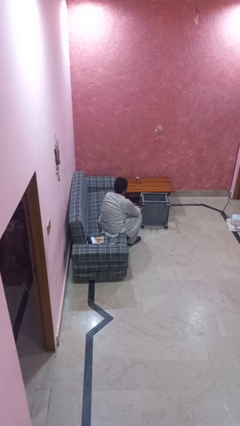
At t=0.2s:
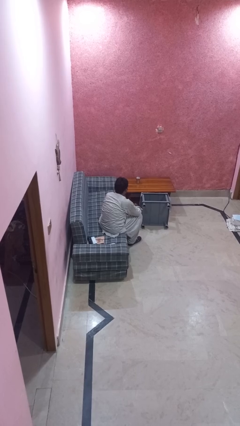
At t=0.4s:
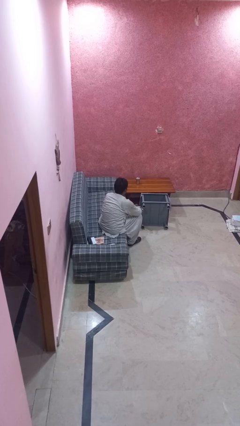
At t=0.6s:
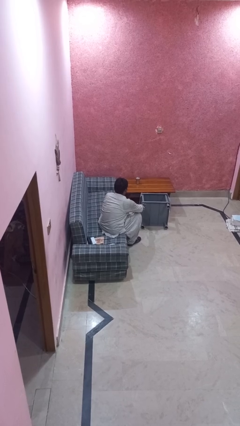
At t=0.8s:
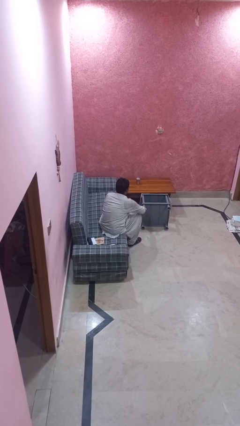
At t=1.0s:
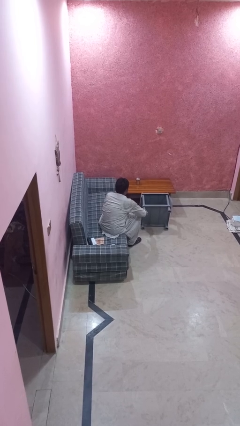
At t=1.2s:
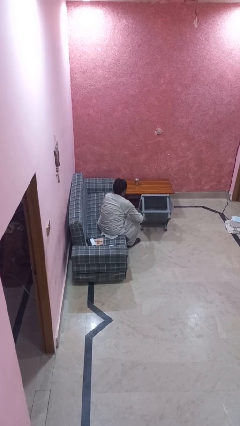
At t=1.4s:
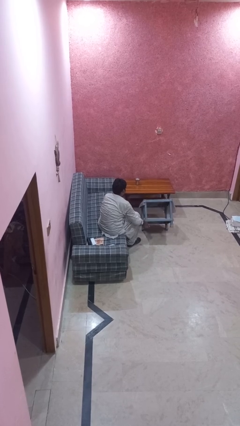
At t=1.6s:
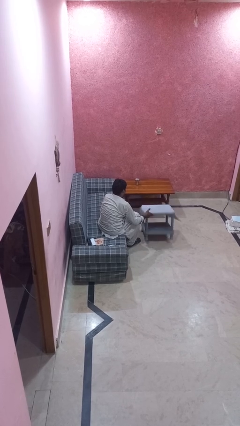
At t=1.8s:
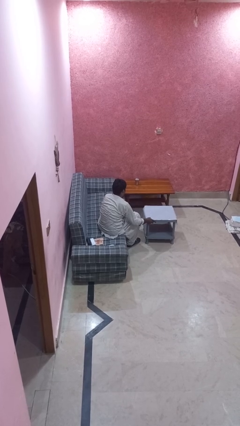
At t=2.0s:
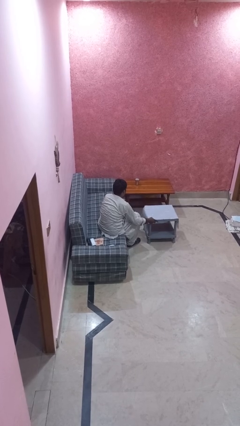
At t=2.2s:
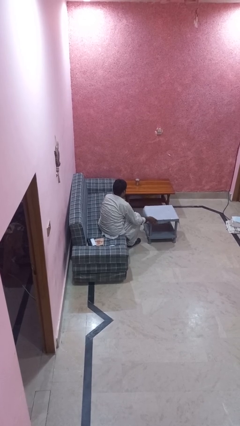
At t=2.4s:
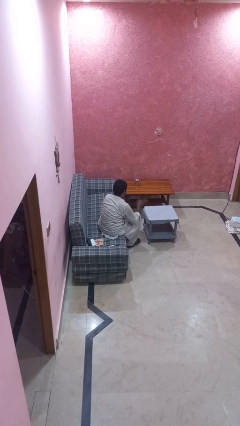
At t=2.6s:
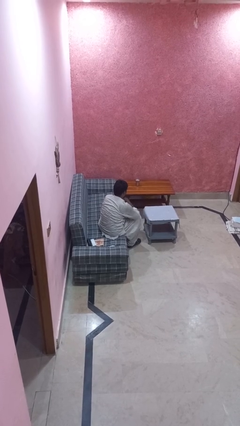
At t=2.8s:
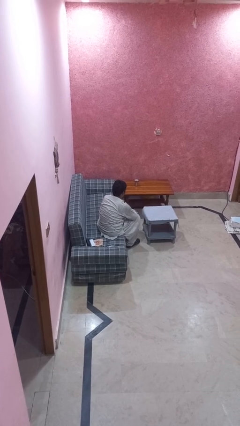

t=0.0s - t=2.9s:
person sets upright furniture

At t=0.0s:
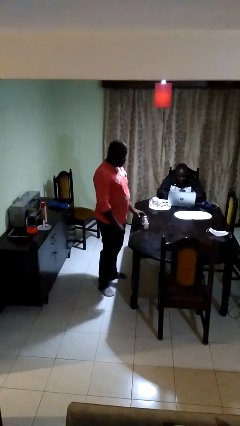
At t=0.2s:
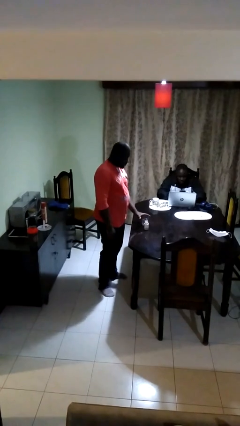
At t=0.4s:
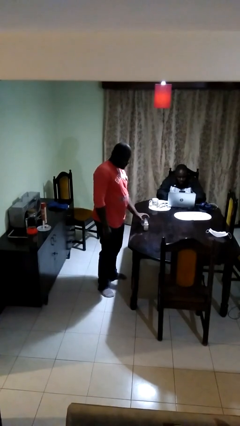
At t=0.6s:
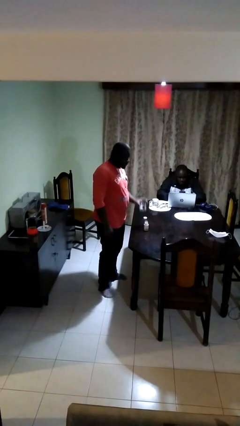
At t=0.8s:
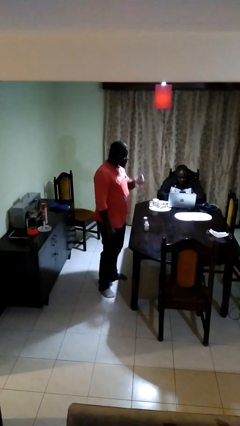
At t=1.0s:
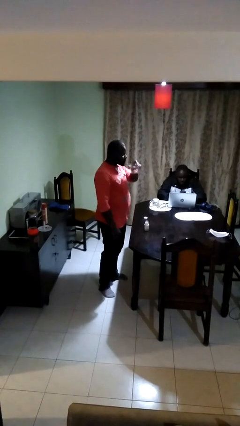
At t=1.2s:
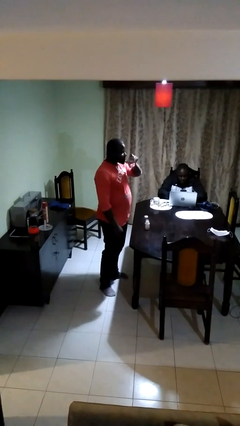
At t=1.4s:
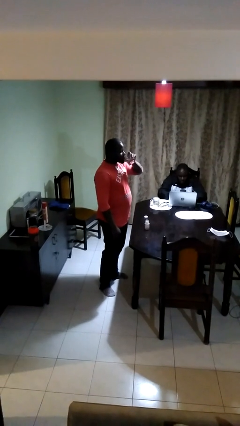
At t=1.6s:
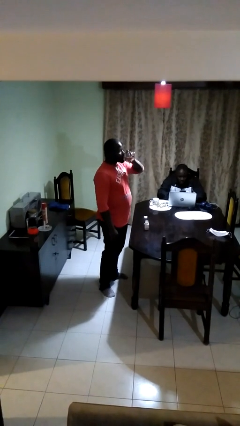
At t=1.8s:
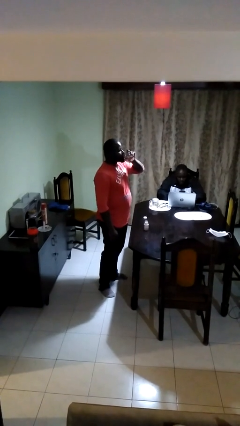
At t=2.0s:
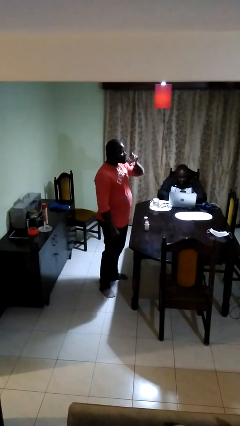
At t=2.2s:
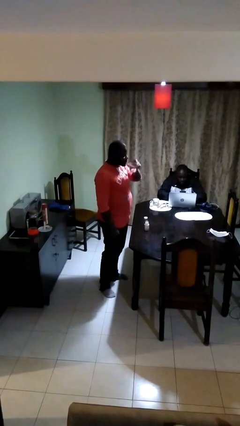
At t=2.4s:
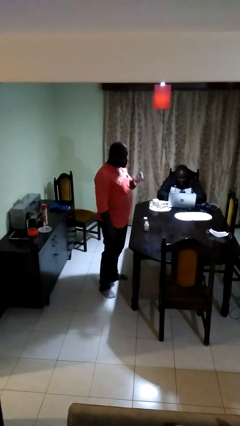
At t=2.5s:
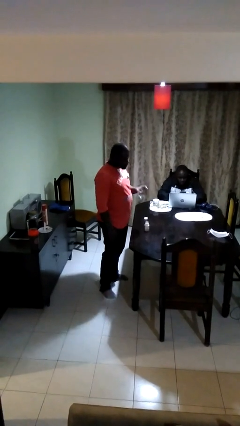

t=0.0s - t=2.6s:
person drinks from cup

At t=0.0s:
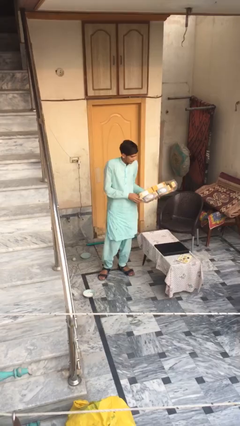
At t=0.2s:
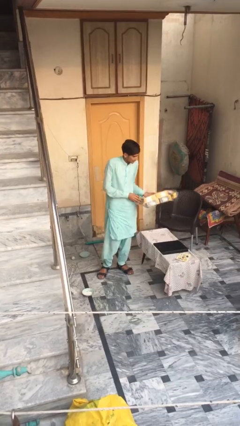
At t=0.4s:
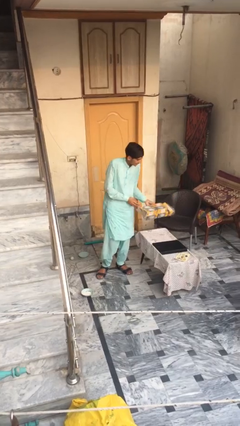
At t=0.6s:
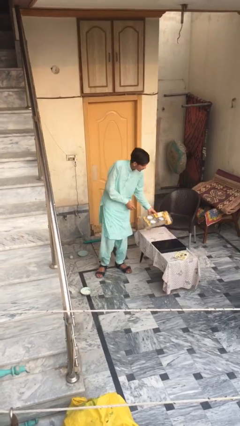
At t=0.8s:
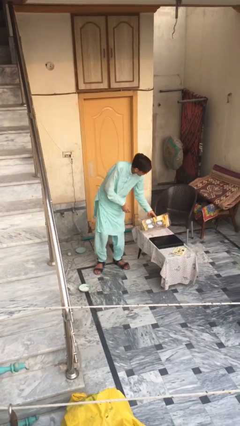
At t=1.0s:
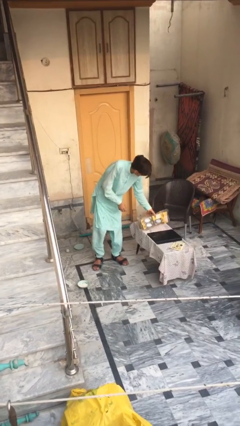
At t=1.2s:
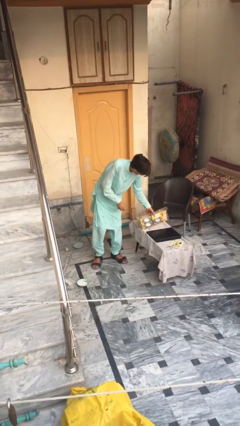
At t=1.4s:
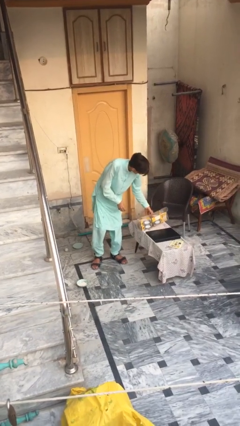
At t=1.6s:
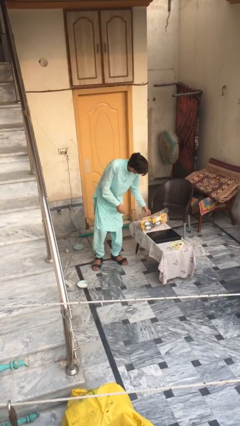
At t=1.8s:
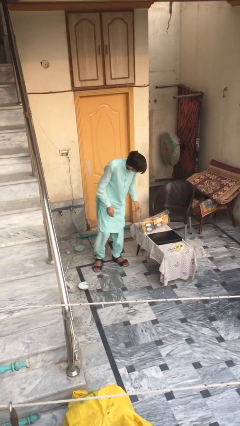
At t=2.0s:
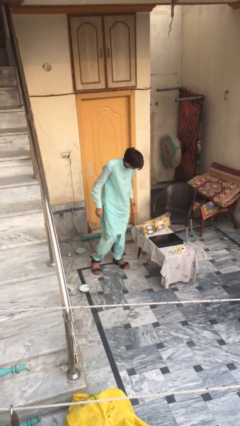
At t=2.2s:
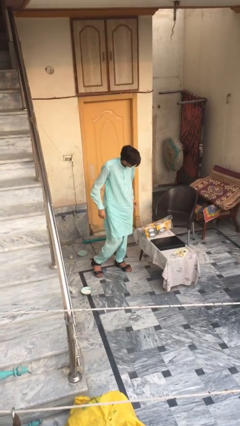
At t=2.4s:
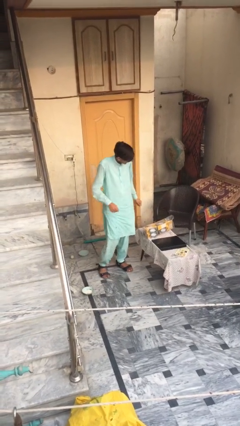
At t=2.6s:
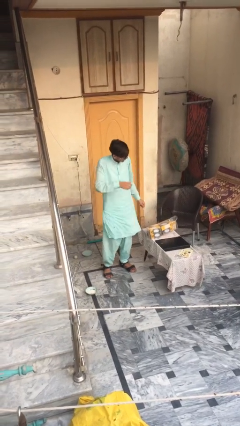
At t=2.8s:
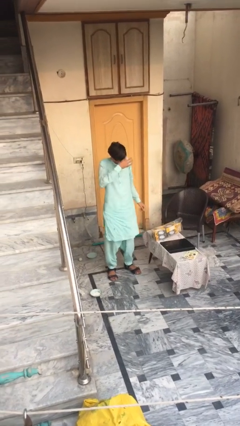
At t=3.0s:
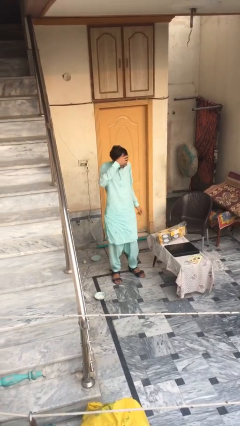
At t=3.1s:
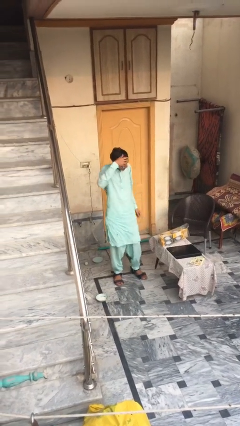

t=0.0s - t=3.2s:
person puts down object on table

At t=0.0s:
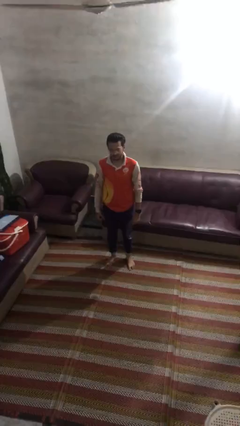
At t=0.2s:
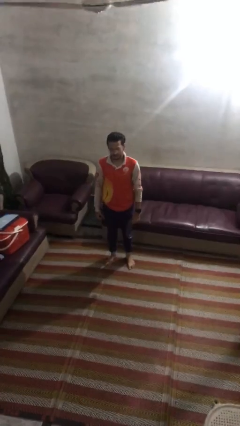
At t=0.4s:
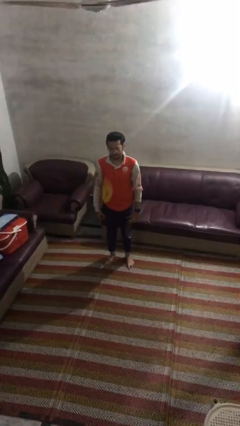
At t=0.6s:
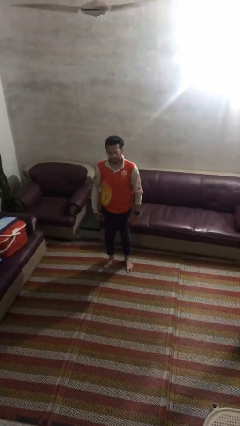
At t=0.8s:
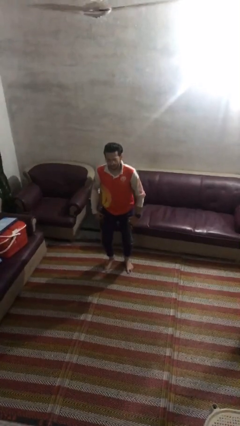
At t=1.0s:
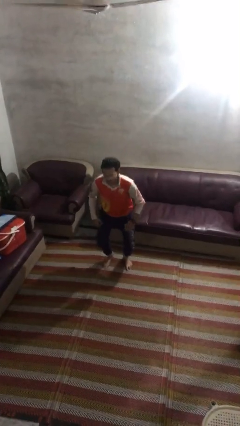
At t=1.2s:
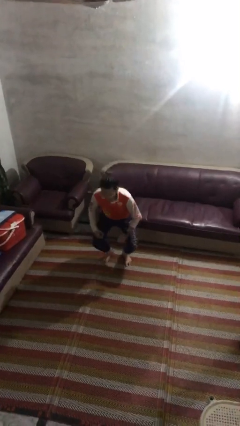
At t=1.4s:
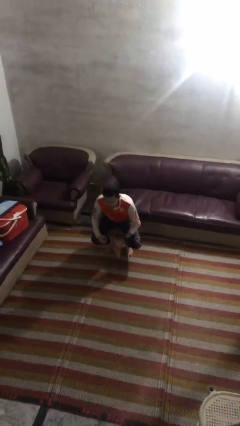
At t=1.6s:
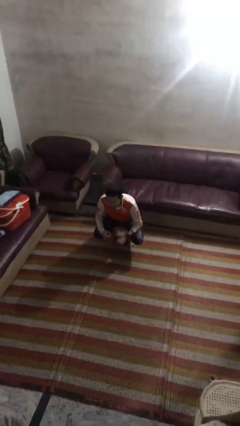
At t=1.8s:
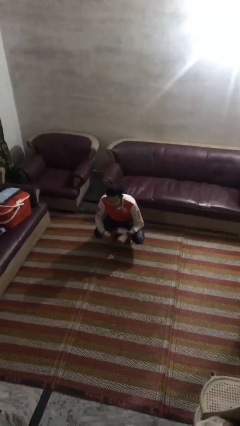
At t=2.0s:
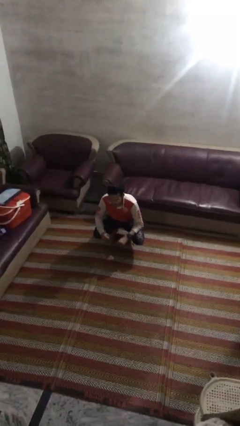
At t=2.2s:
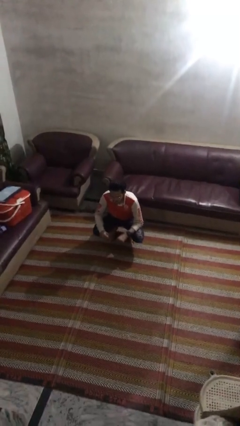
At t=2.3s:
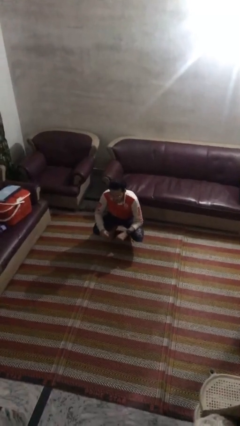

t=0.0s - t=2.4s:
person squats

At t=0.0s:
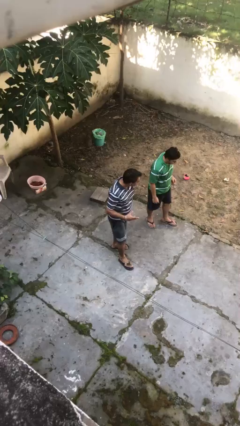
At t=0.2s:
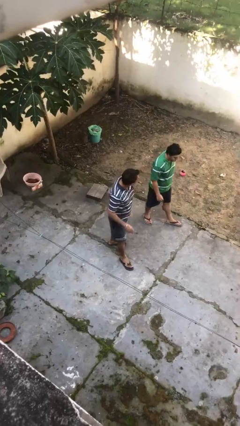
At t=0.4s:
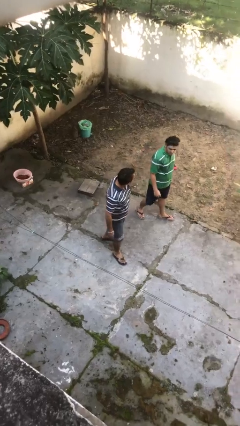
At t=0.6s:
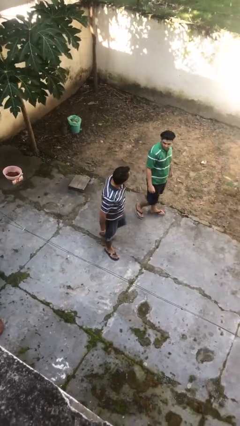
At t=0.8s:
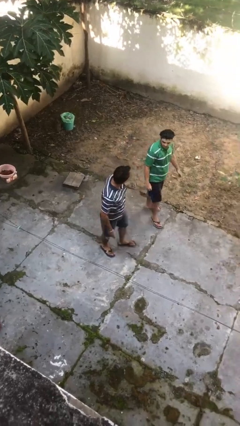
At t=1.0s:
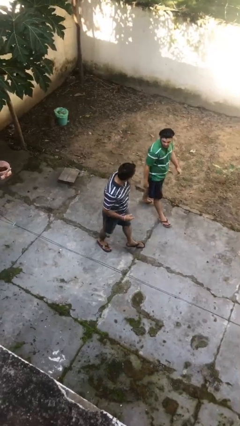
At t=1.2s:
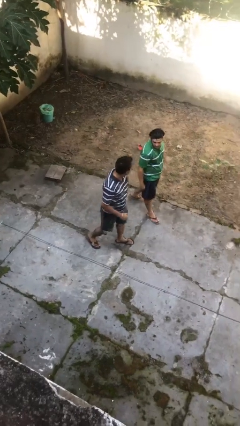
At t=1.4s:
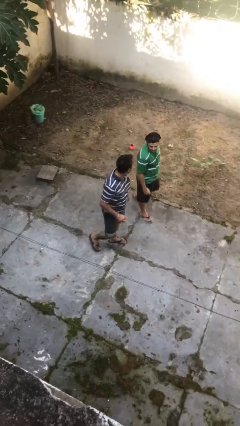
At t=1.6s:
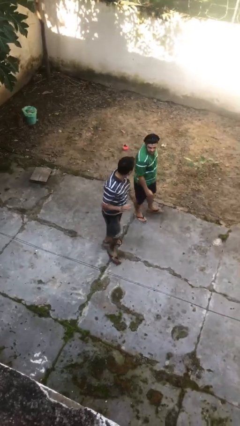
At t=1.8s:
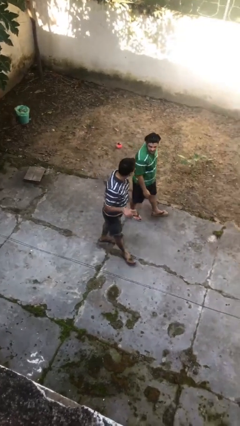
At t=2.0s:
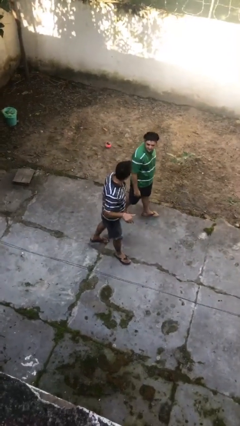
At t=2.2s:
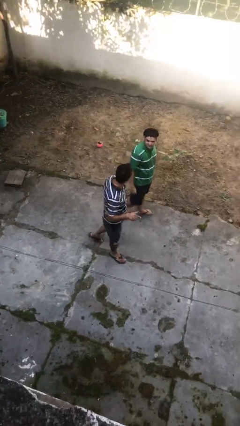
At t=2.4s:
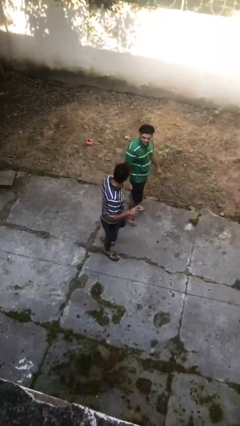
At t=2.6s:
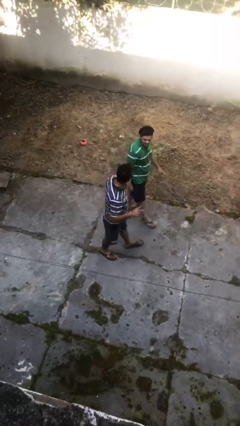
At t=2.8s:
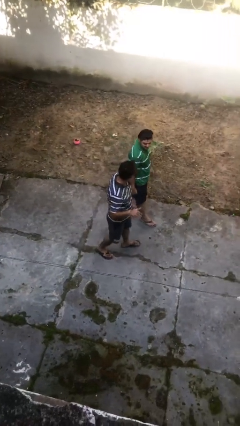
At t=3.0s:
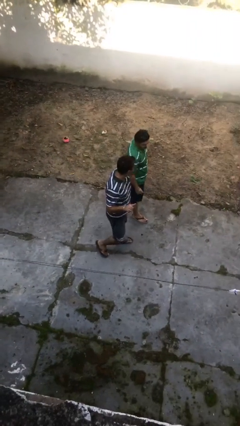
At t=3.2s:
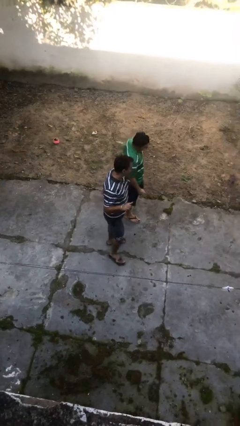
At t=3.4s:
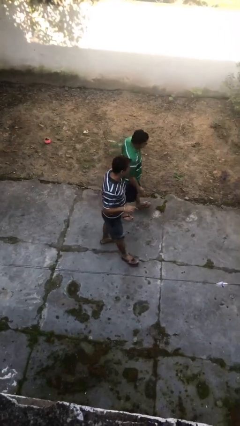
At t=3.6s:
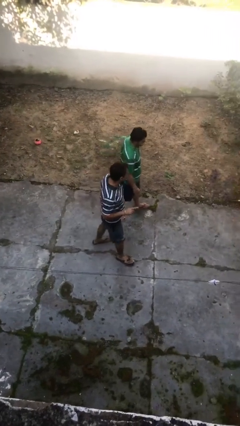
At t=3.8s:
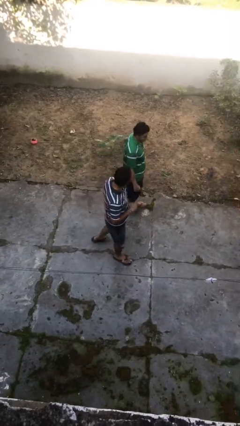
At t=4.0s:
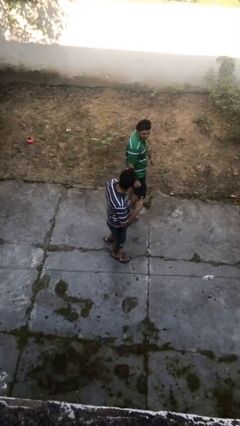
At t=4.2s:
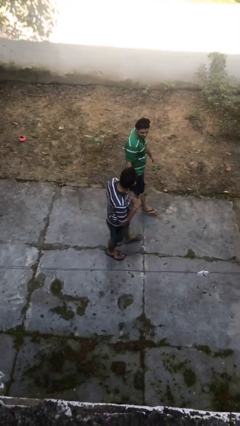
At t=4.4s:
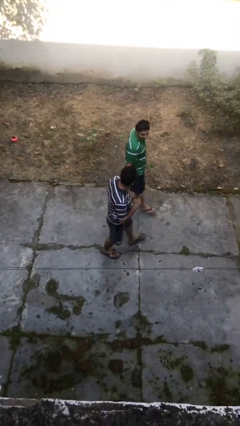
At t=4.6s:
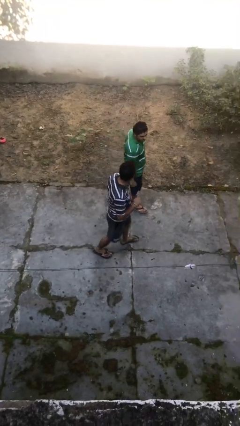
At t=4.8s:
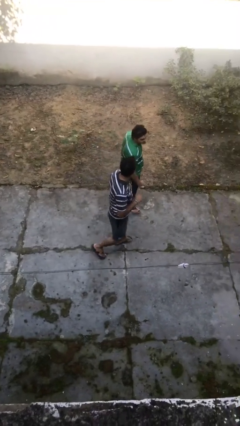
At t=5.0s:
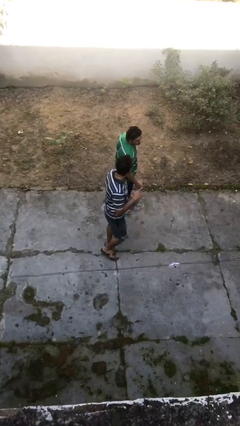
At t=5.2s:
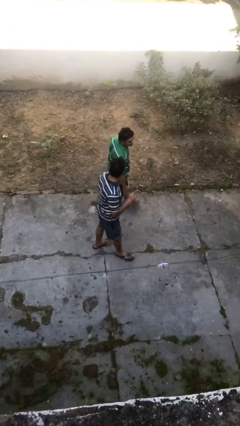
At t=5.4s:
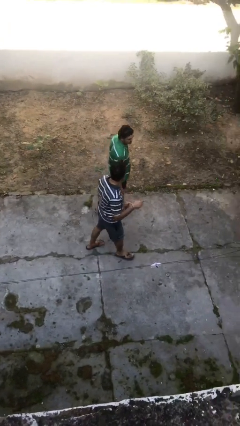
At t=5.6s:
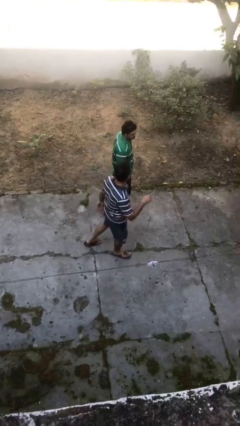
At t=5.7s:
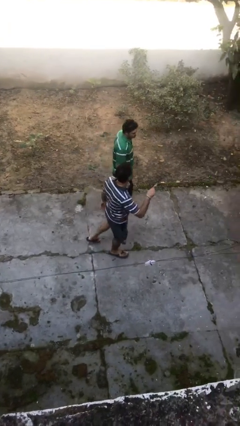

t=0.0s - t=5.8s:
person talks to person

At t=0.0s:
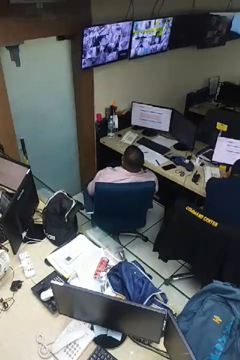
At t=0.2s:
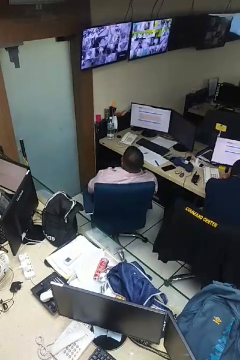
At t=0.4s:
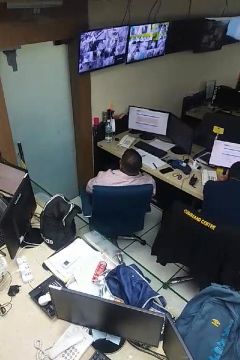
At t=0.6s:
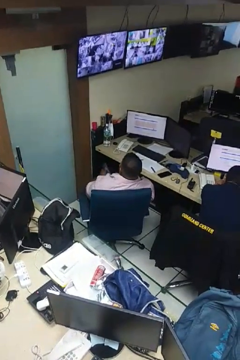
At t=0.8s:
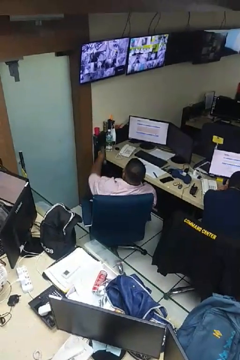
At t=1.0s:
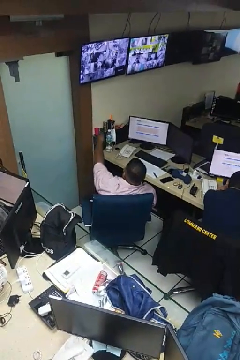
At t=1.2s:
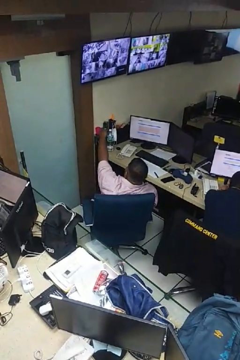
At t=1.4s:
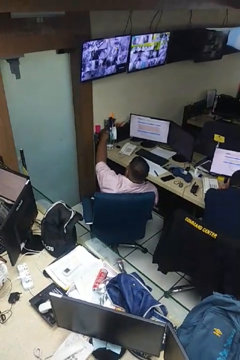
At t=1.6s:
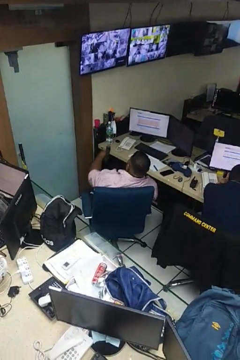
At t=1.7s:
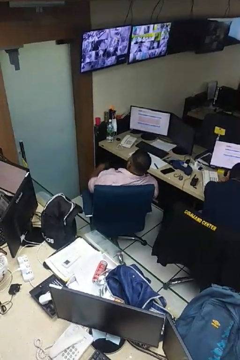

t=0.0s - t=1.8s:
person uses television remote
